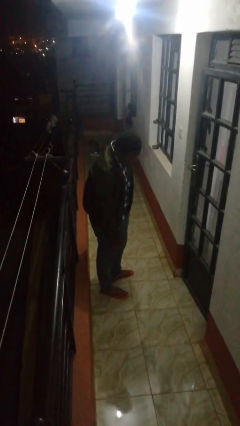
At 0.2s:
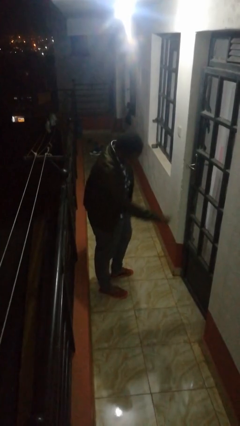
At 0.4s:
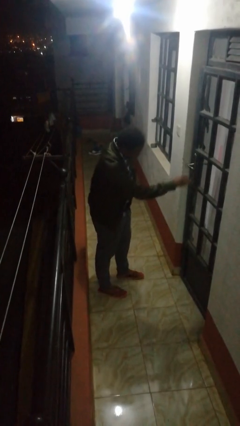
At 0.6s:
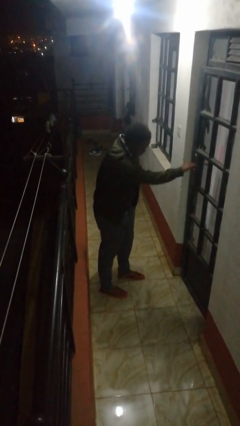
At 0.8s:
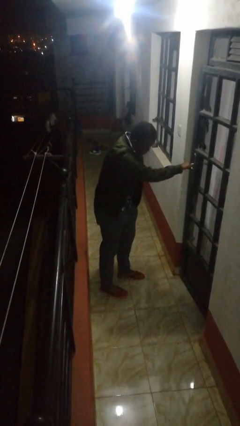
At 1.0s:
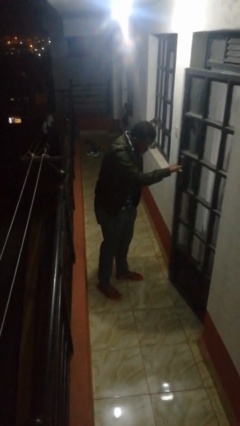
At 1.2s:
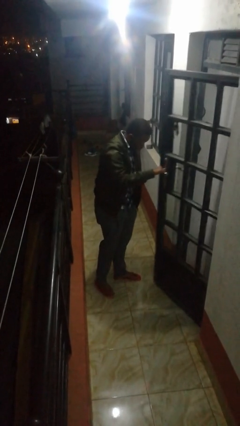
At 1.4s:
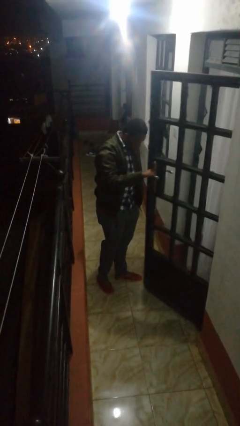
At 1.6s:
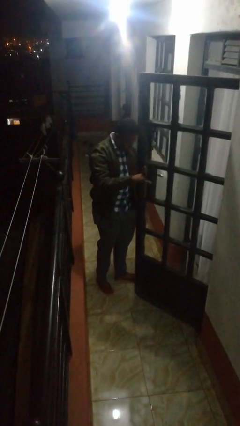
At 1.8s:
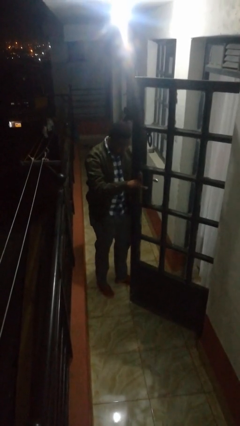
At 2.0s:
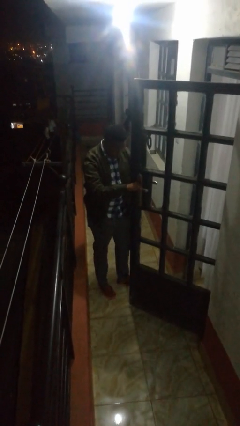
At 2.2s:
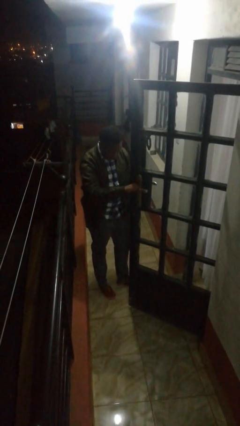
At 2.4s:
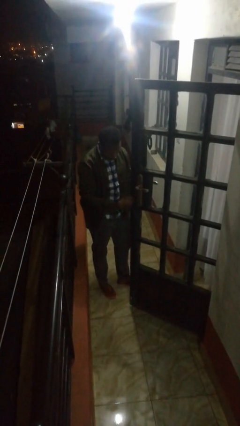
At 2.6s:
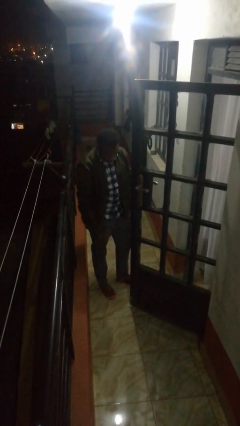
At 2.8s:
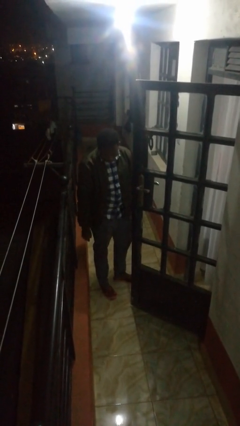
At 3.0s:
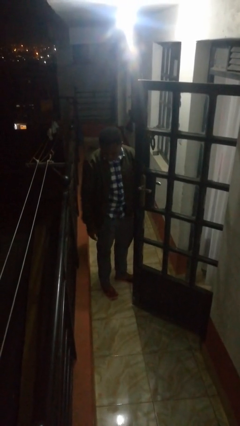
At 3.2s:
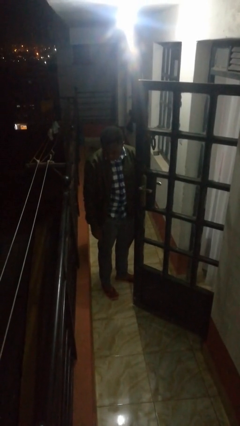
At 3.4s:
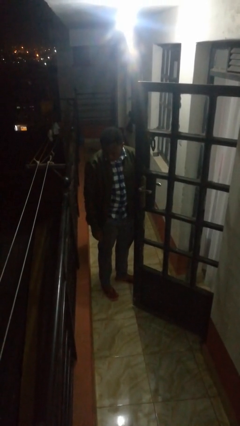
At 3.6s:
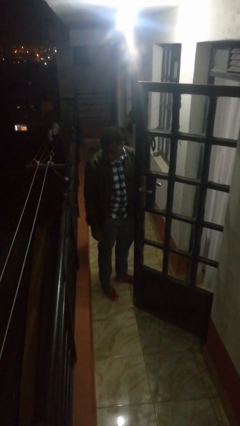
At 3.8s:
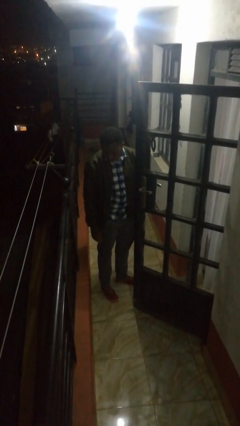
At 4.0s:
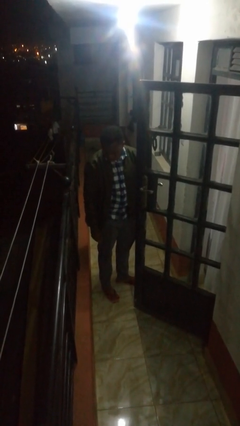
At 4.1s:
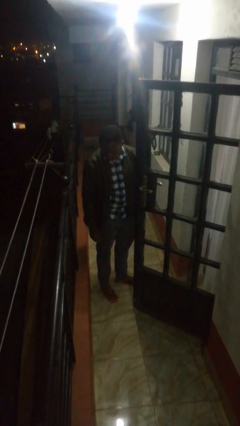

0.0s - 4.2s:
person opens facility door

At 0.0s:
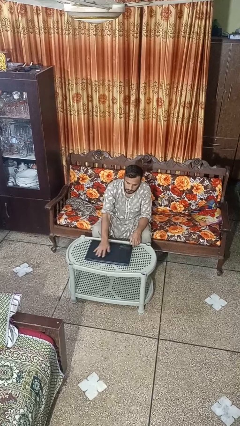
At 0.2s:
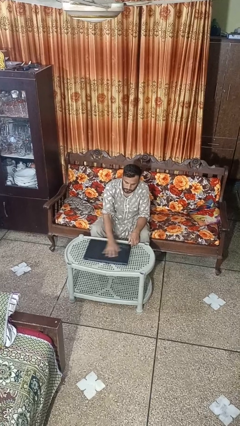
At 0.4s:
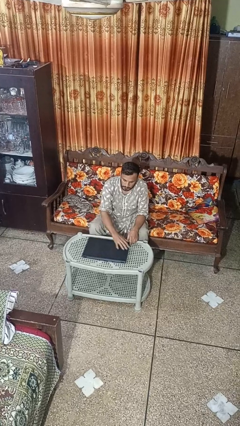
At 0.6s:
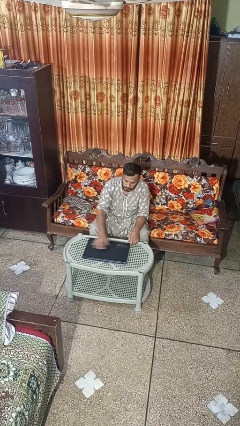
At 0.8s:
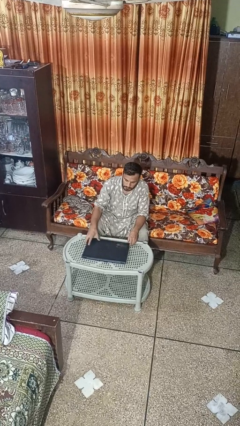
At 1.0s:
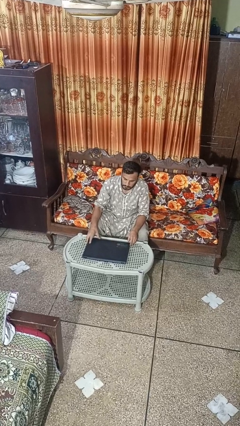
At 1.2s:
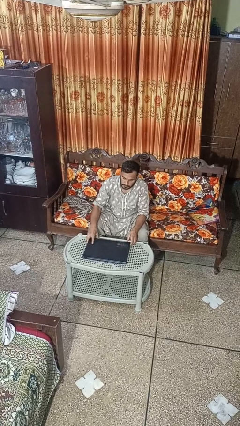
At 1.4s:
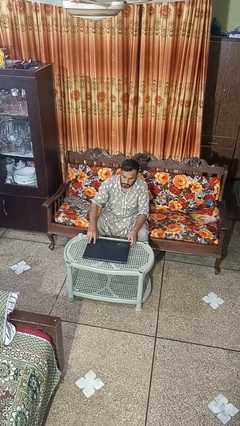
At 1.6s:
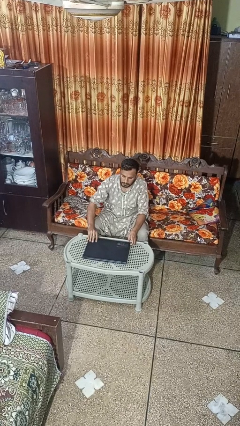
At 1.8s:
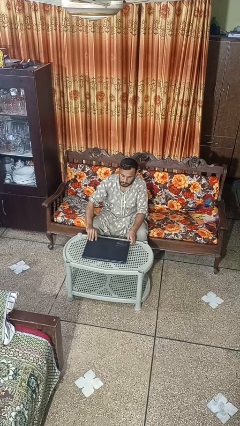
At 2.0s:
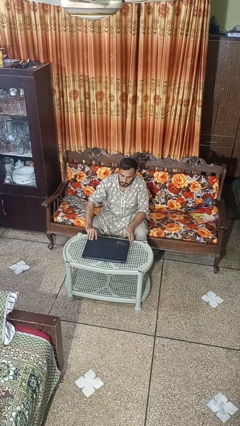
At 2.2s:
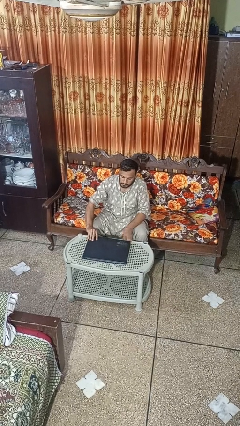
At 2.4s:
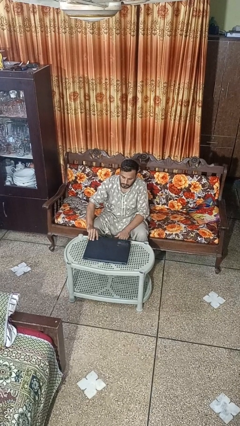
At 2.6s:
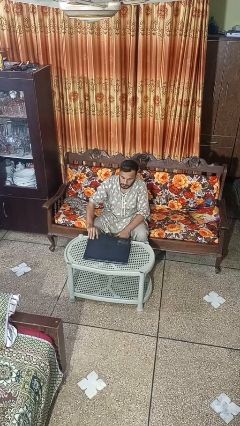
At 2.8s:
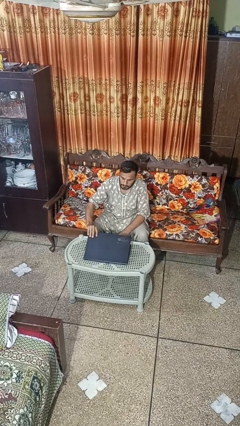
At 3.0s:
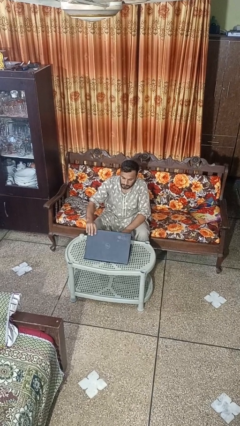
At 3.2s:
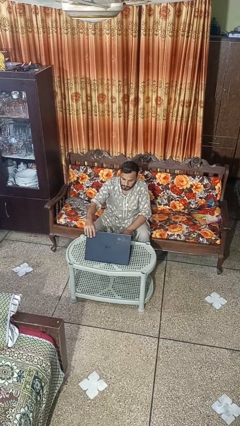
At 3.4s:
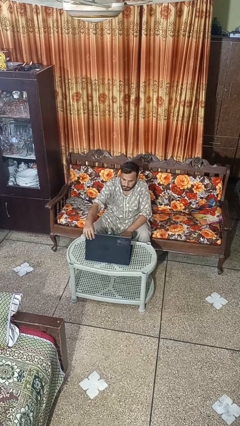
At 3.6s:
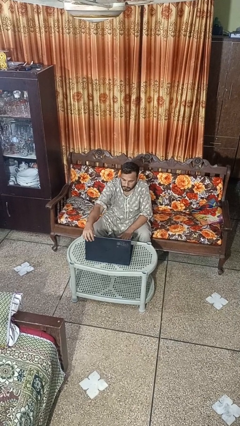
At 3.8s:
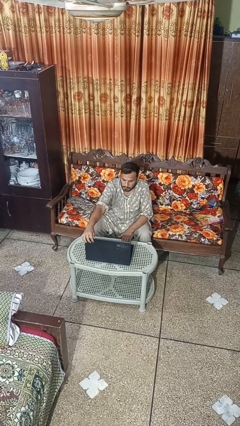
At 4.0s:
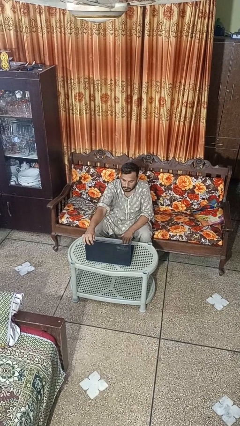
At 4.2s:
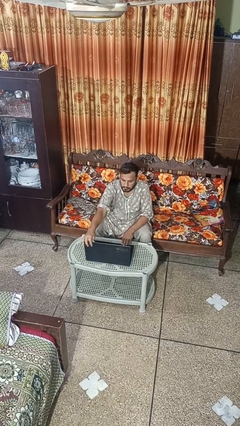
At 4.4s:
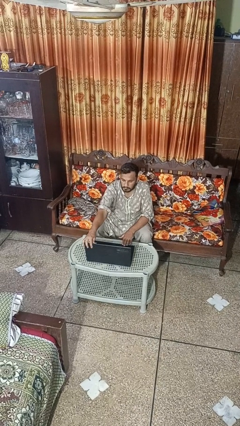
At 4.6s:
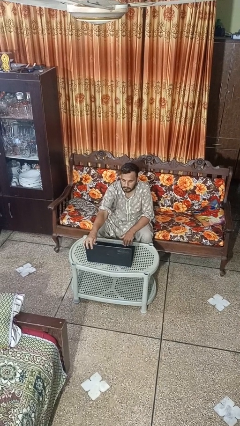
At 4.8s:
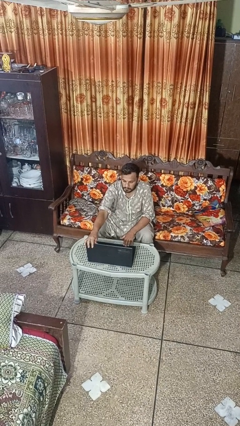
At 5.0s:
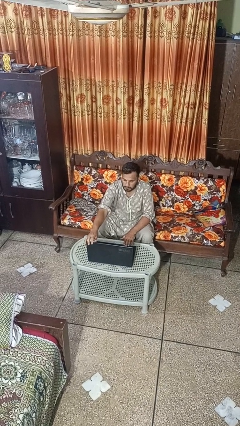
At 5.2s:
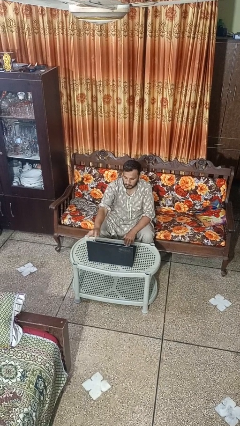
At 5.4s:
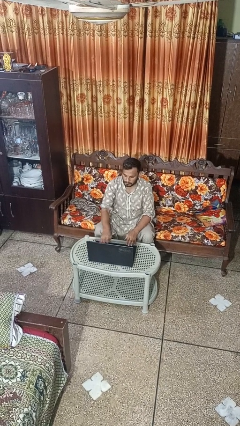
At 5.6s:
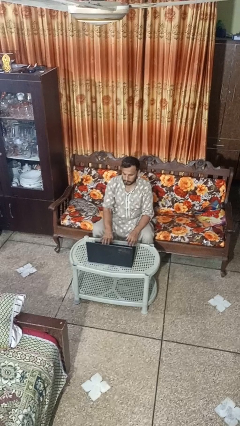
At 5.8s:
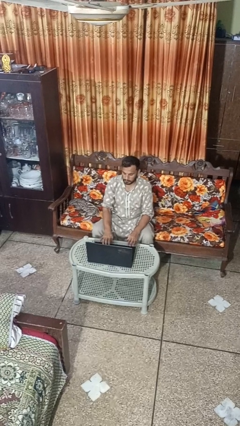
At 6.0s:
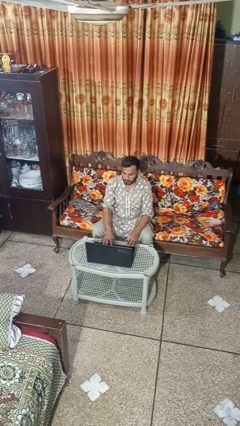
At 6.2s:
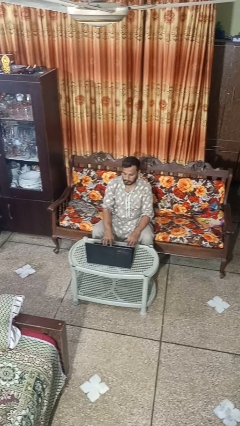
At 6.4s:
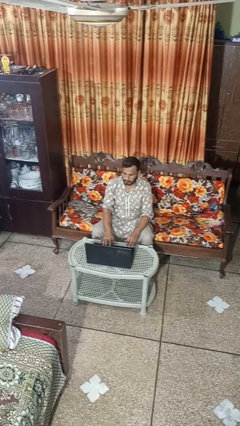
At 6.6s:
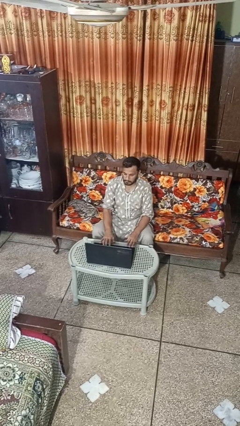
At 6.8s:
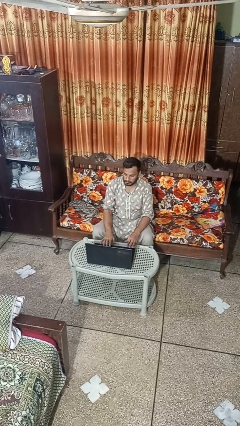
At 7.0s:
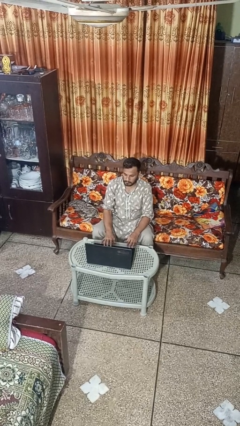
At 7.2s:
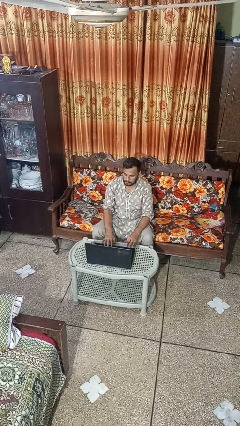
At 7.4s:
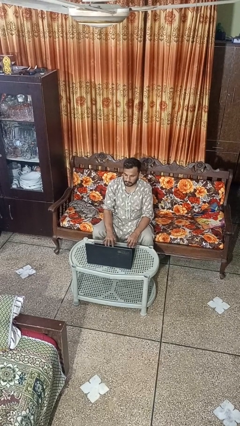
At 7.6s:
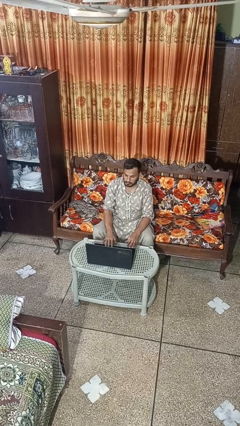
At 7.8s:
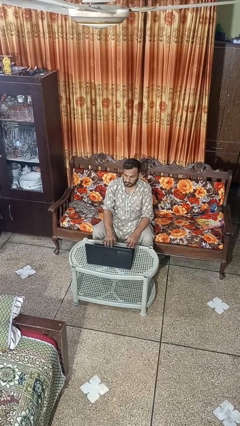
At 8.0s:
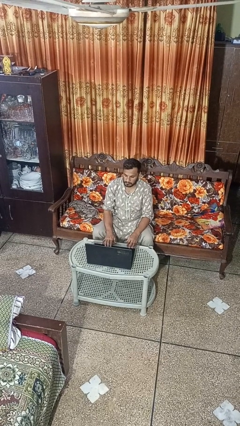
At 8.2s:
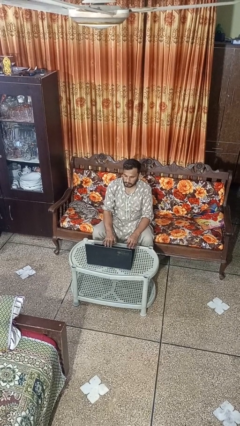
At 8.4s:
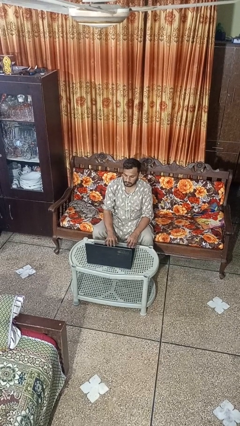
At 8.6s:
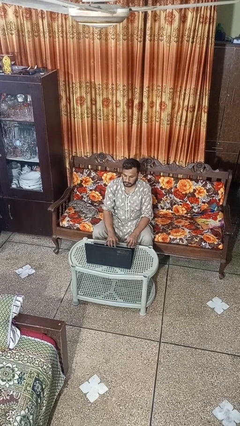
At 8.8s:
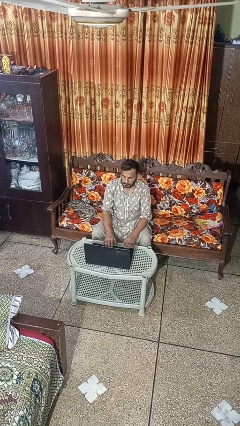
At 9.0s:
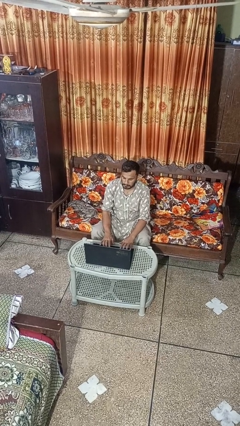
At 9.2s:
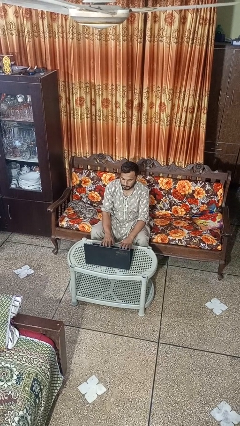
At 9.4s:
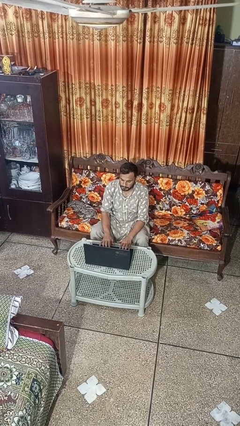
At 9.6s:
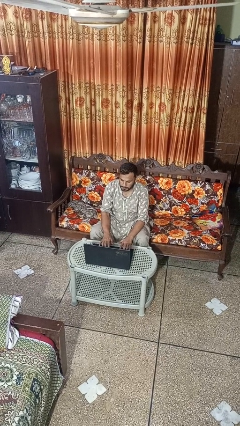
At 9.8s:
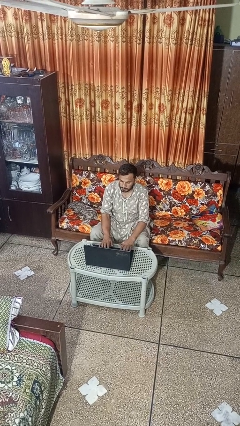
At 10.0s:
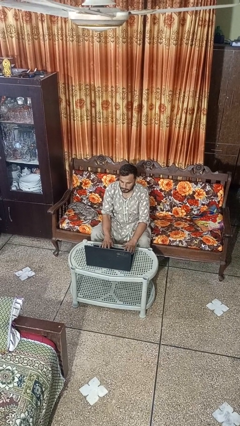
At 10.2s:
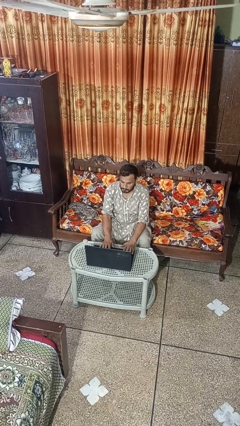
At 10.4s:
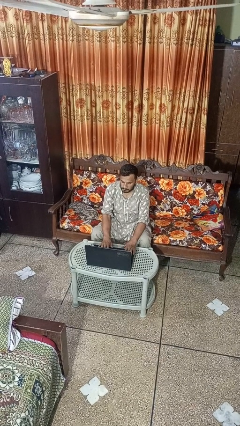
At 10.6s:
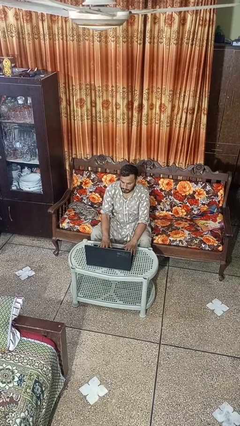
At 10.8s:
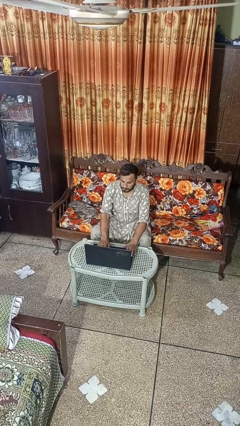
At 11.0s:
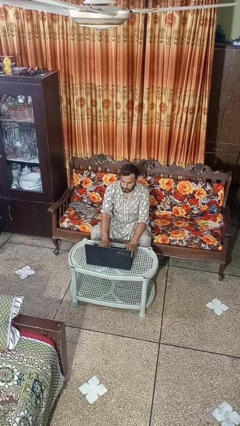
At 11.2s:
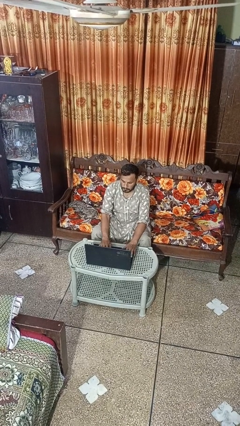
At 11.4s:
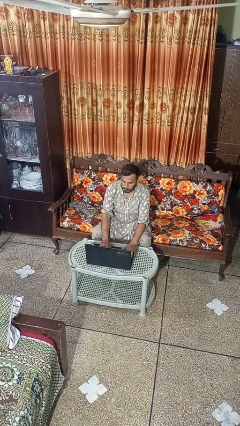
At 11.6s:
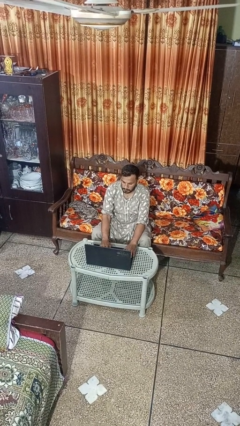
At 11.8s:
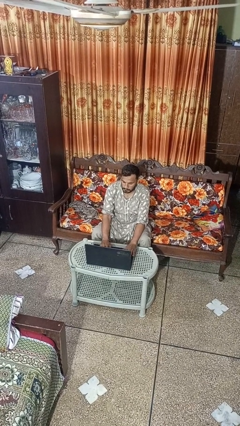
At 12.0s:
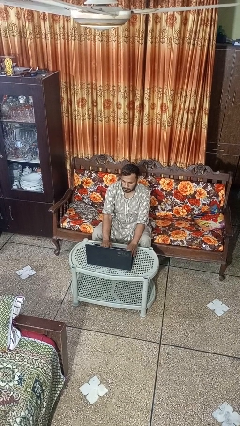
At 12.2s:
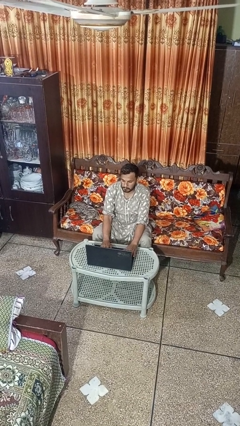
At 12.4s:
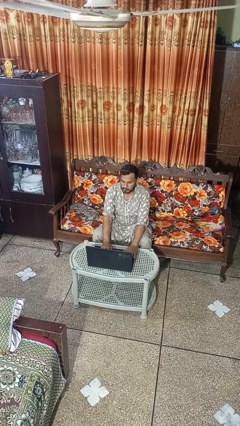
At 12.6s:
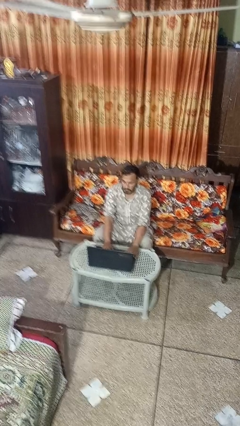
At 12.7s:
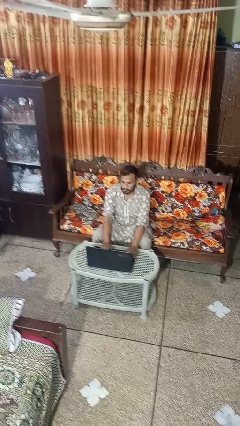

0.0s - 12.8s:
person opens laptop

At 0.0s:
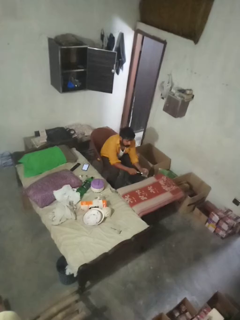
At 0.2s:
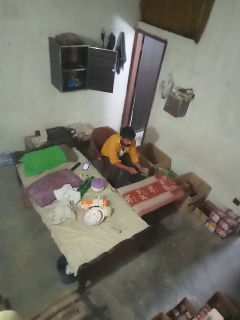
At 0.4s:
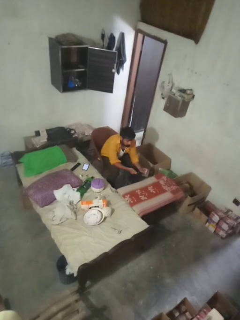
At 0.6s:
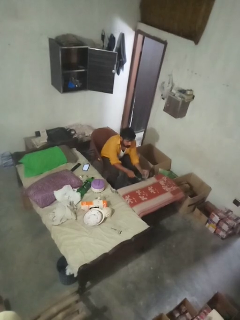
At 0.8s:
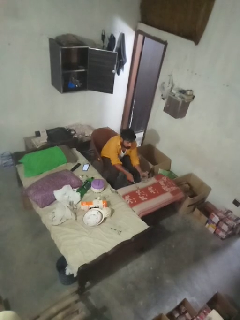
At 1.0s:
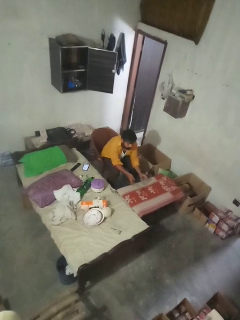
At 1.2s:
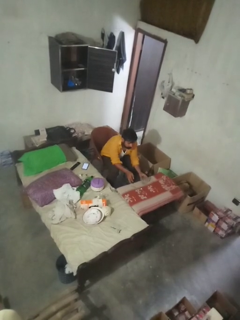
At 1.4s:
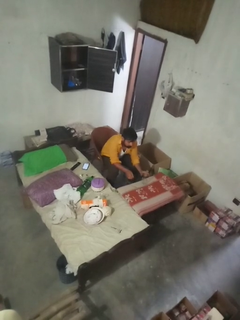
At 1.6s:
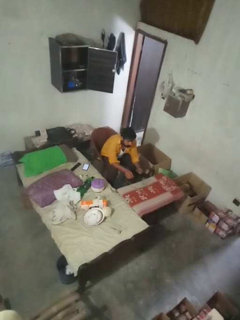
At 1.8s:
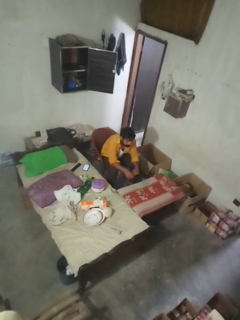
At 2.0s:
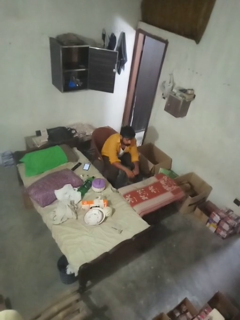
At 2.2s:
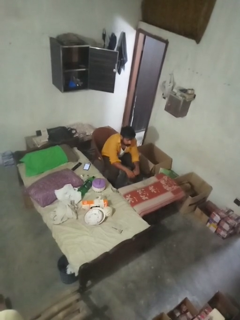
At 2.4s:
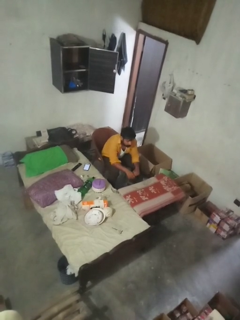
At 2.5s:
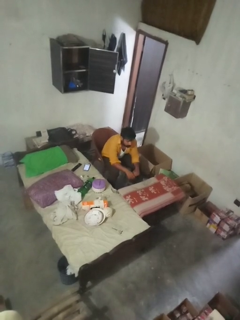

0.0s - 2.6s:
person sets upright glass
